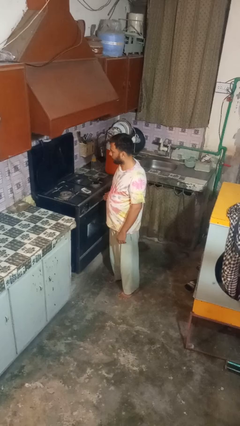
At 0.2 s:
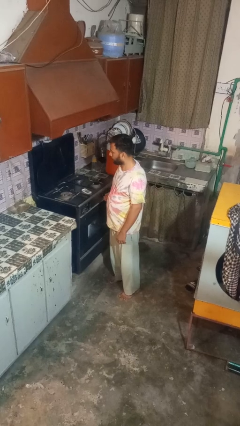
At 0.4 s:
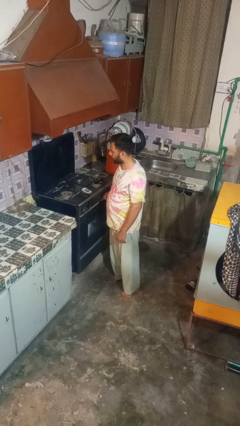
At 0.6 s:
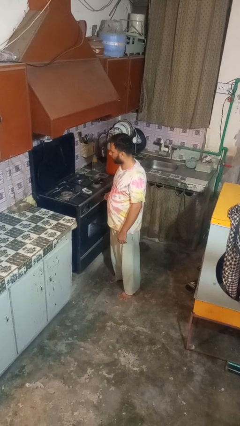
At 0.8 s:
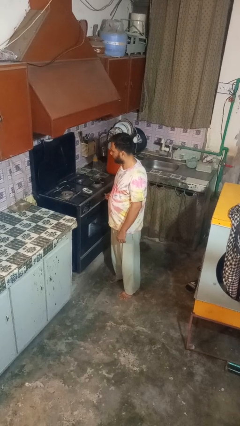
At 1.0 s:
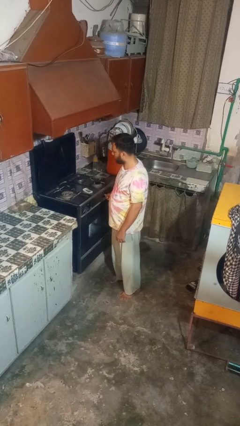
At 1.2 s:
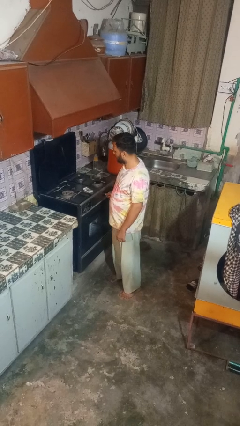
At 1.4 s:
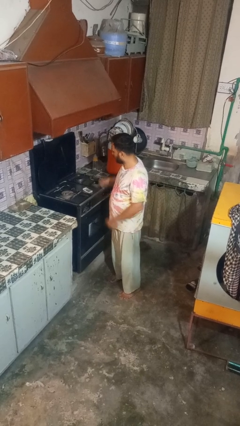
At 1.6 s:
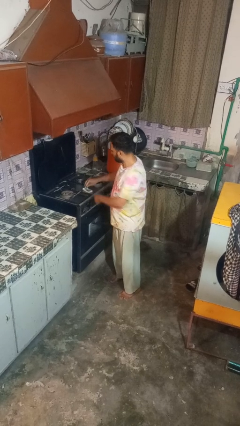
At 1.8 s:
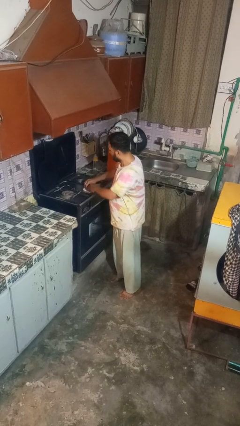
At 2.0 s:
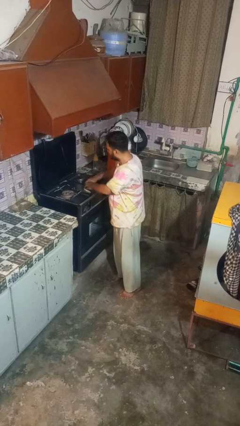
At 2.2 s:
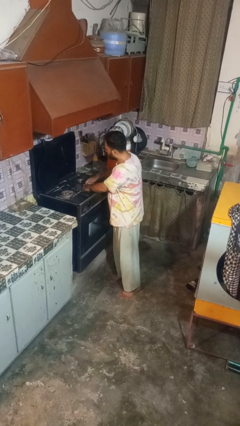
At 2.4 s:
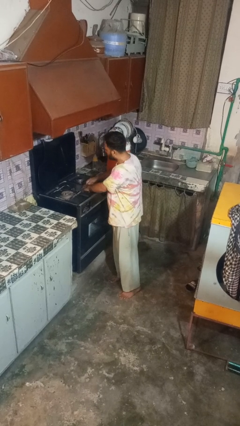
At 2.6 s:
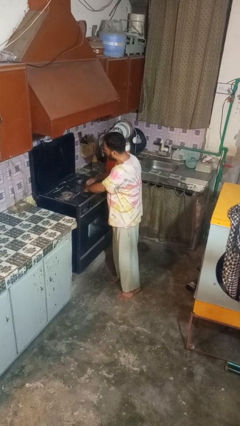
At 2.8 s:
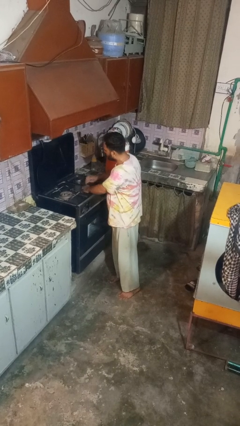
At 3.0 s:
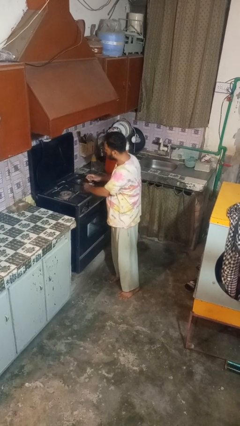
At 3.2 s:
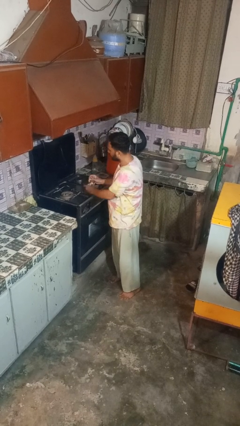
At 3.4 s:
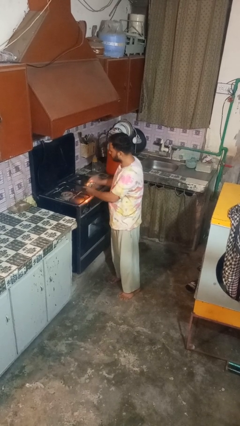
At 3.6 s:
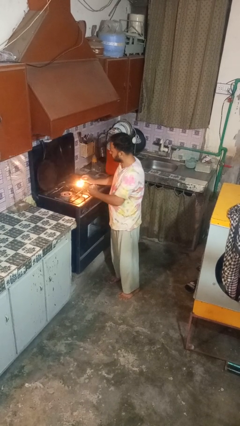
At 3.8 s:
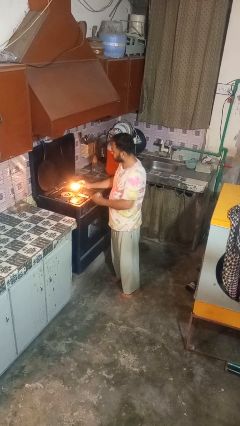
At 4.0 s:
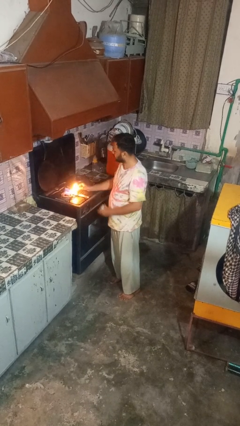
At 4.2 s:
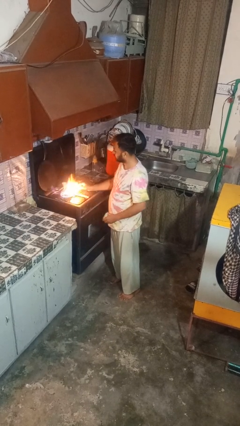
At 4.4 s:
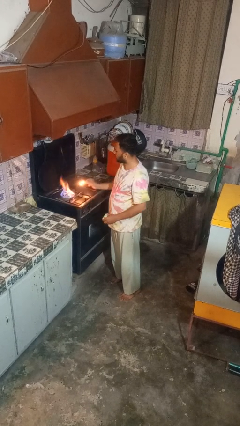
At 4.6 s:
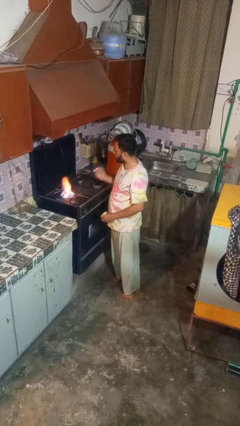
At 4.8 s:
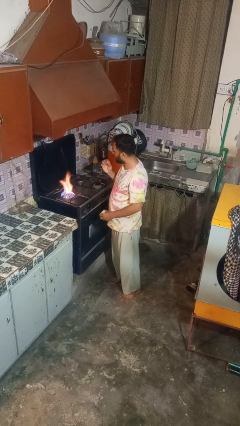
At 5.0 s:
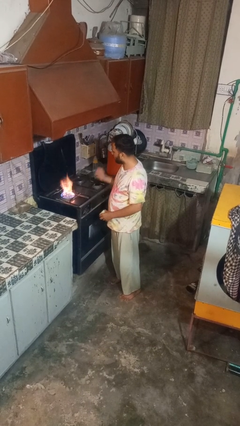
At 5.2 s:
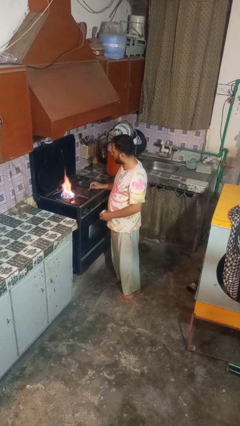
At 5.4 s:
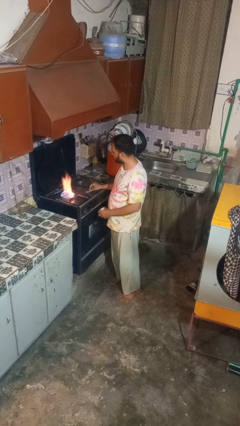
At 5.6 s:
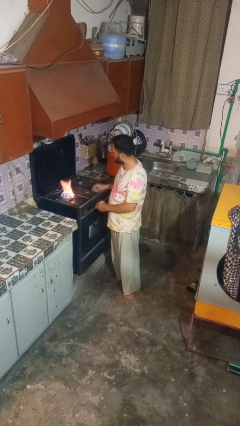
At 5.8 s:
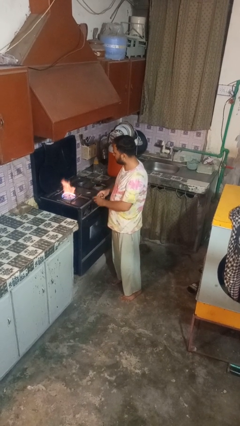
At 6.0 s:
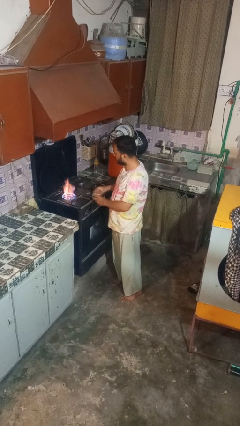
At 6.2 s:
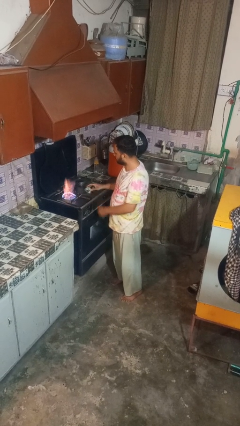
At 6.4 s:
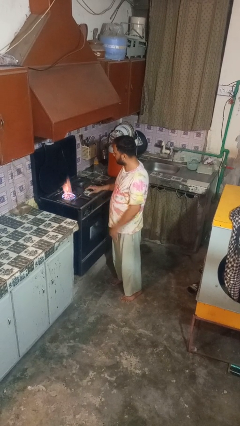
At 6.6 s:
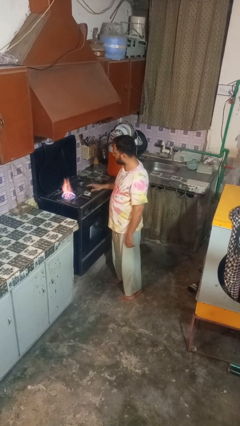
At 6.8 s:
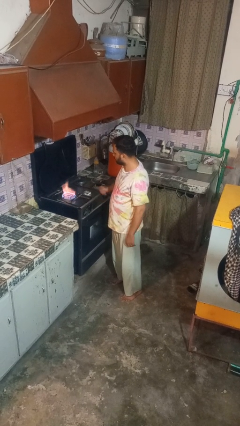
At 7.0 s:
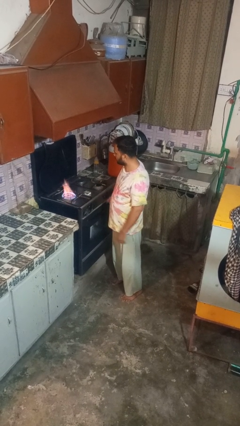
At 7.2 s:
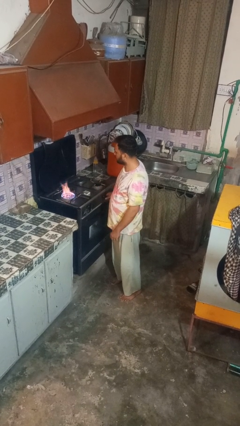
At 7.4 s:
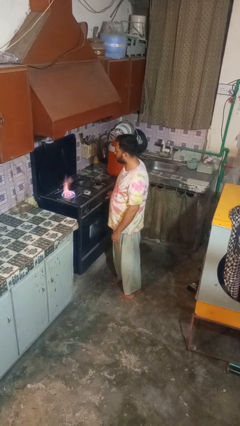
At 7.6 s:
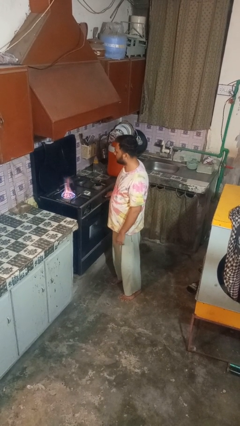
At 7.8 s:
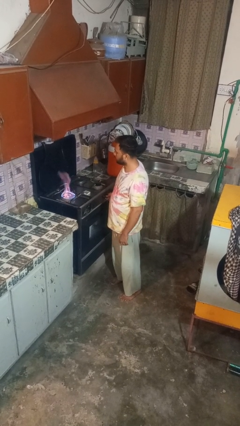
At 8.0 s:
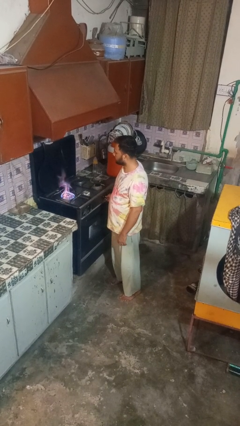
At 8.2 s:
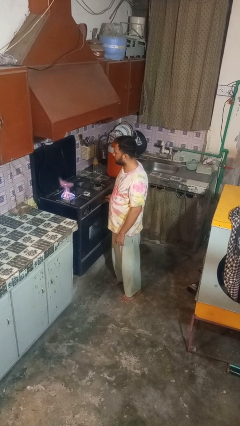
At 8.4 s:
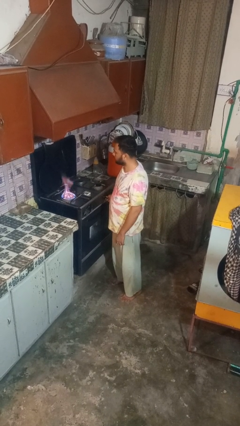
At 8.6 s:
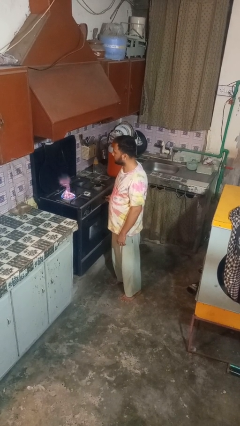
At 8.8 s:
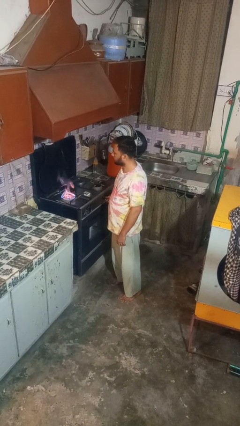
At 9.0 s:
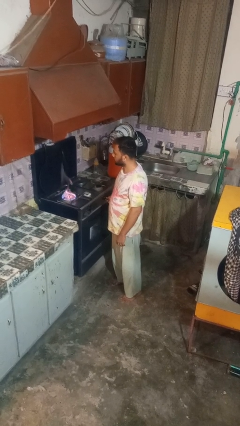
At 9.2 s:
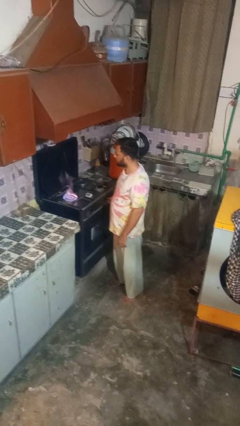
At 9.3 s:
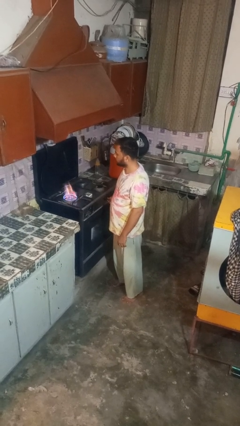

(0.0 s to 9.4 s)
person turns on stovetop

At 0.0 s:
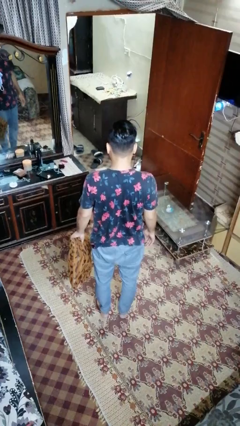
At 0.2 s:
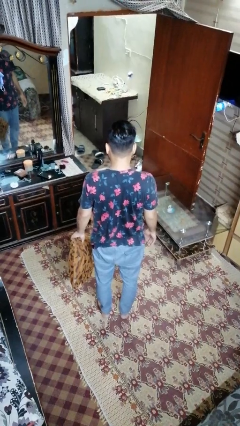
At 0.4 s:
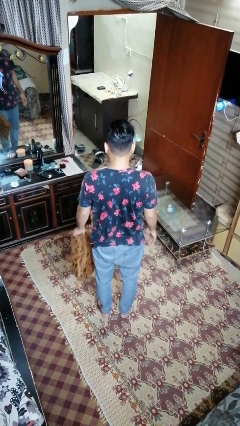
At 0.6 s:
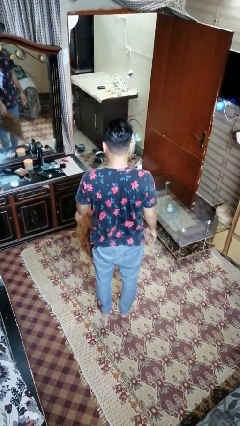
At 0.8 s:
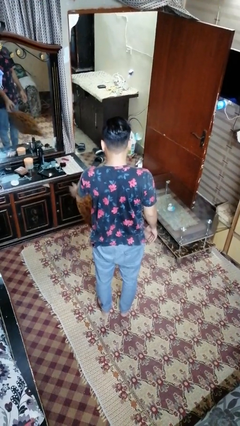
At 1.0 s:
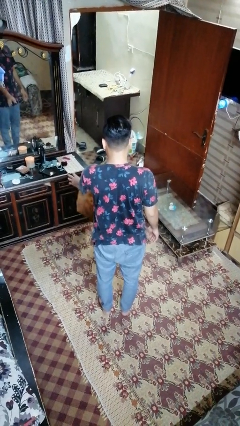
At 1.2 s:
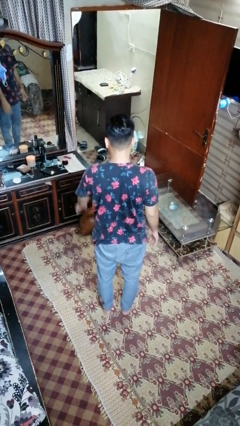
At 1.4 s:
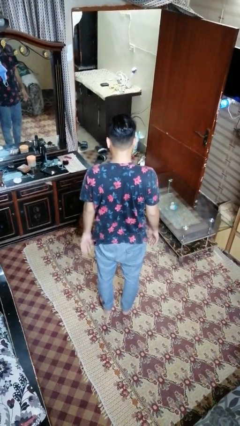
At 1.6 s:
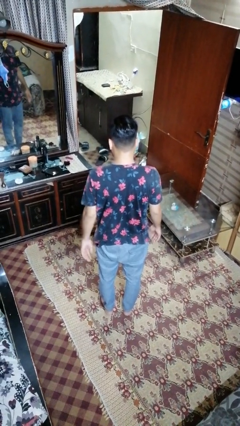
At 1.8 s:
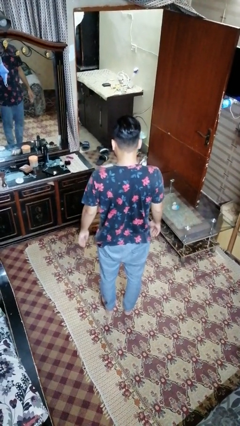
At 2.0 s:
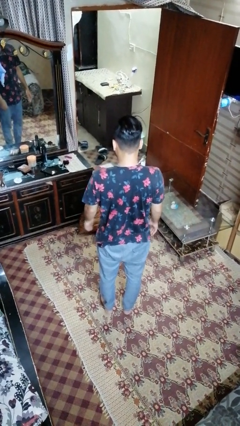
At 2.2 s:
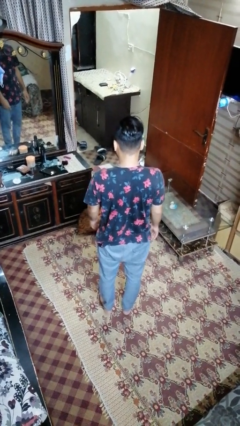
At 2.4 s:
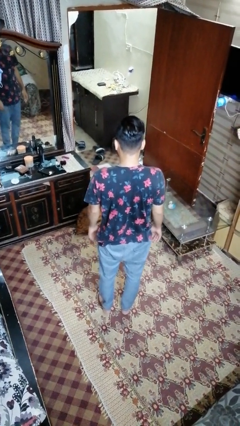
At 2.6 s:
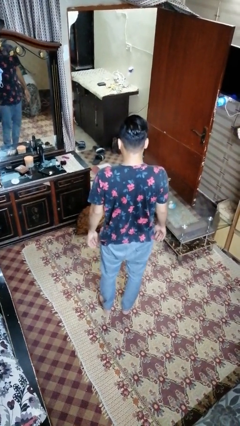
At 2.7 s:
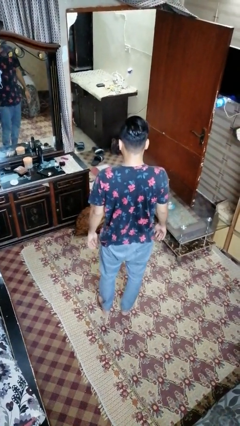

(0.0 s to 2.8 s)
person throws object to ground

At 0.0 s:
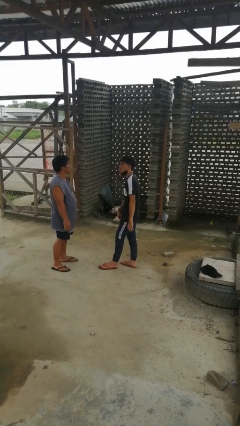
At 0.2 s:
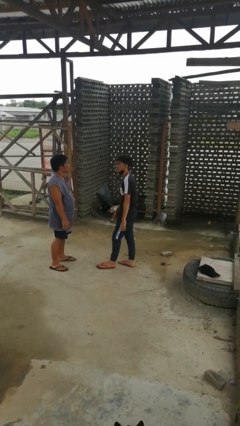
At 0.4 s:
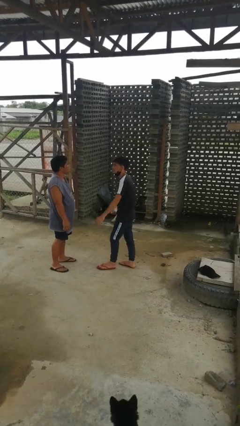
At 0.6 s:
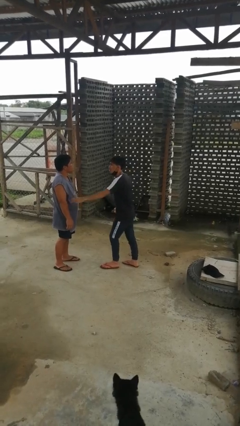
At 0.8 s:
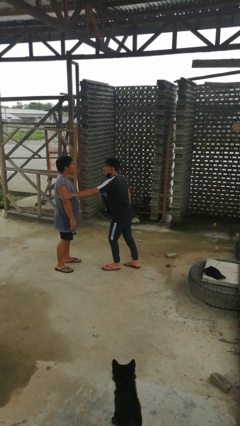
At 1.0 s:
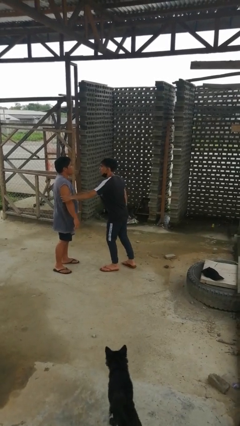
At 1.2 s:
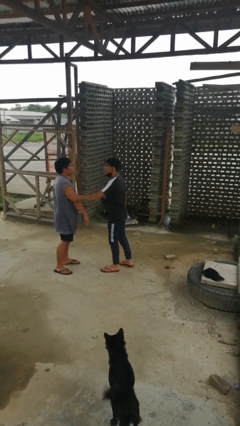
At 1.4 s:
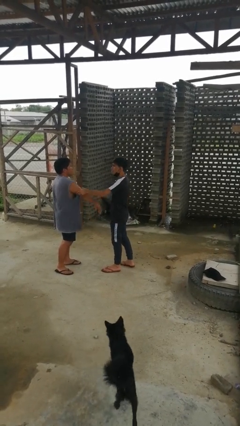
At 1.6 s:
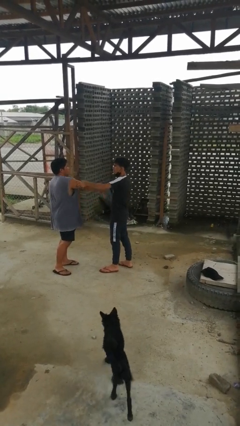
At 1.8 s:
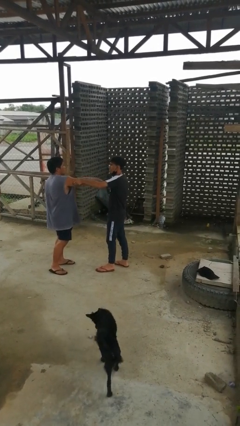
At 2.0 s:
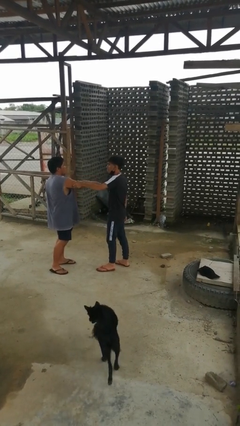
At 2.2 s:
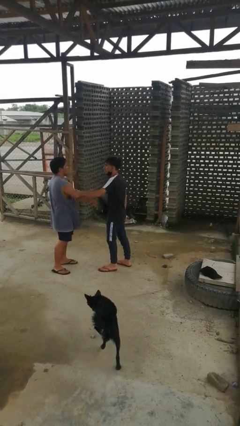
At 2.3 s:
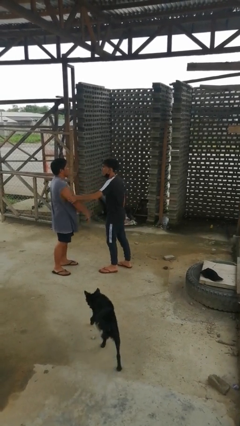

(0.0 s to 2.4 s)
person grabs person by bicep

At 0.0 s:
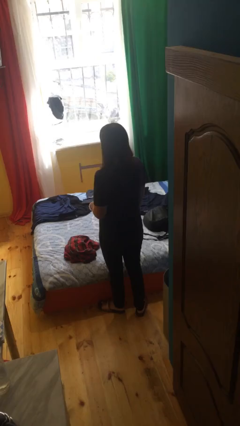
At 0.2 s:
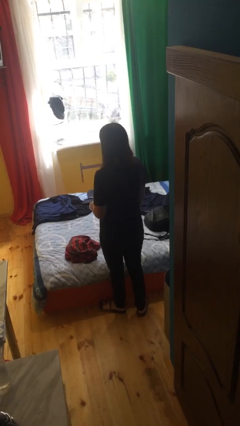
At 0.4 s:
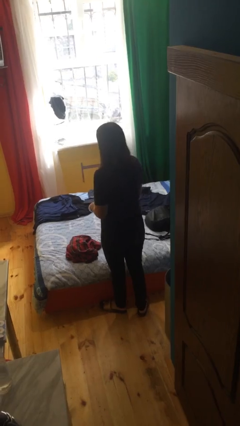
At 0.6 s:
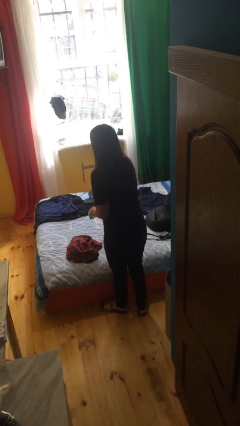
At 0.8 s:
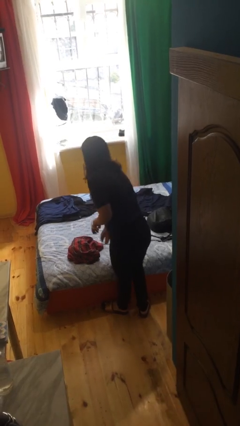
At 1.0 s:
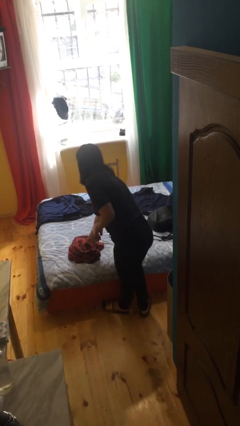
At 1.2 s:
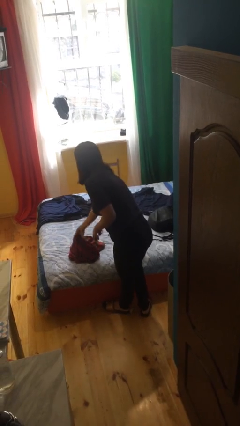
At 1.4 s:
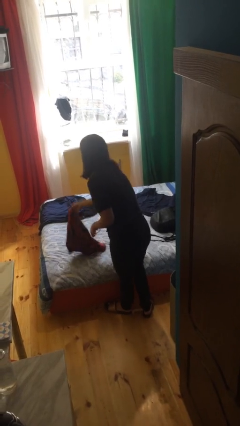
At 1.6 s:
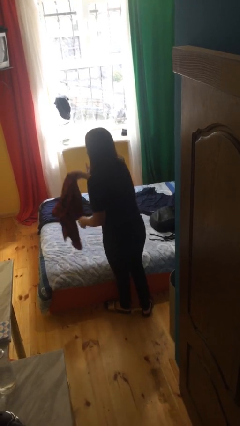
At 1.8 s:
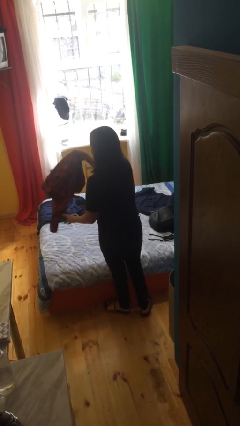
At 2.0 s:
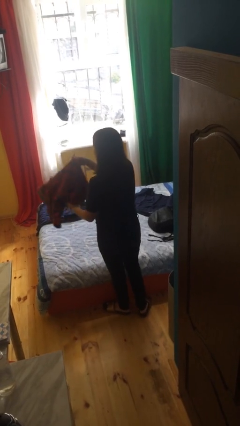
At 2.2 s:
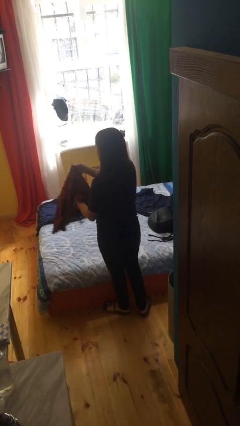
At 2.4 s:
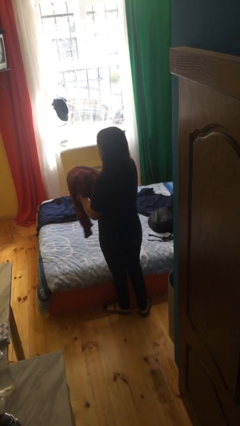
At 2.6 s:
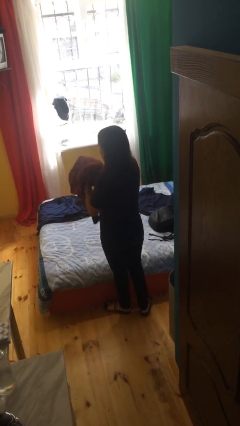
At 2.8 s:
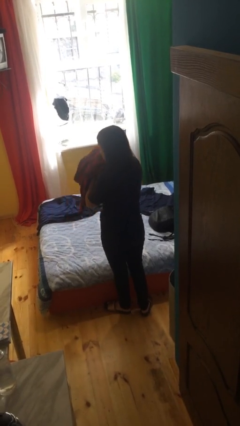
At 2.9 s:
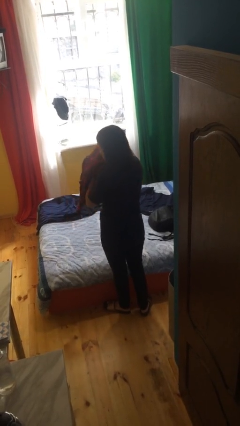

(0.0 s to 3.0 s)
person picks up object from bed
